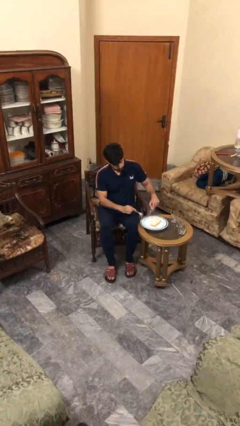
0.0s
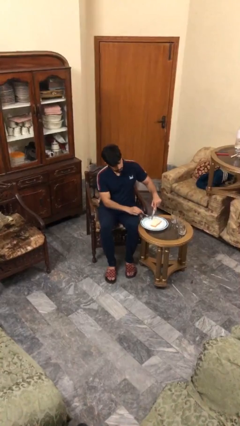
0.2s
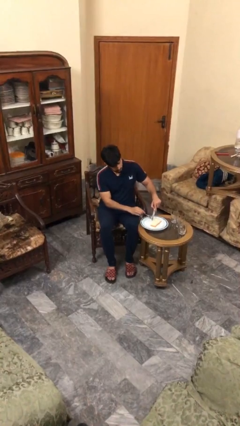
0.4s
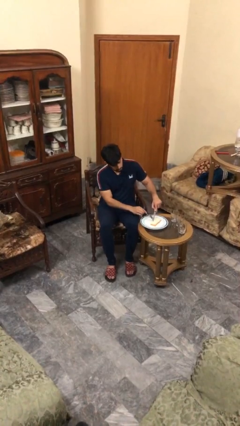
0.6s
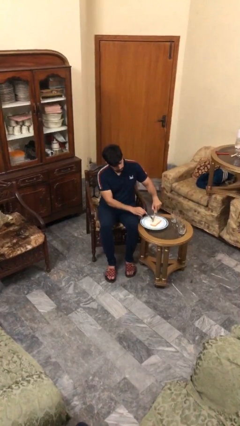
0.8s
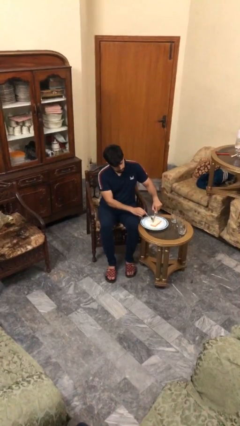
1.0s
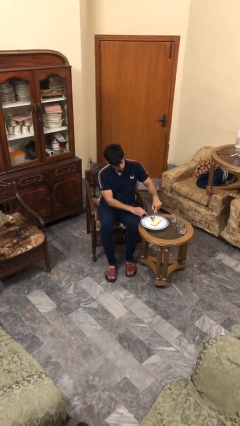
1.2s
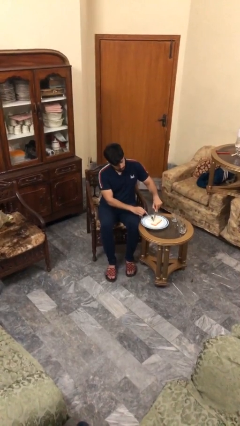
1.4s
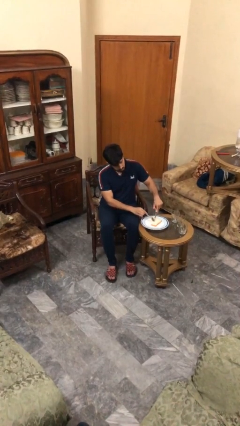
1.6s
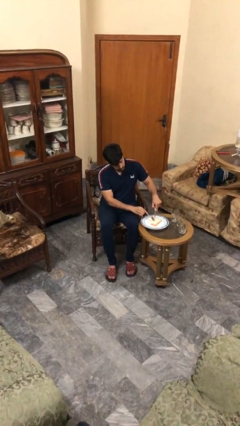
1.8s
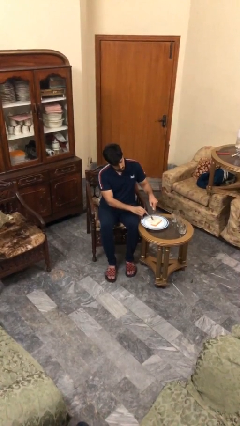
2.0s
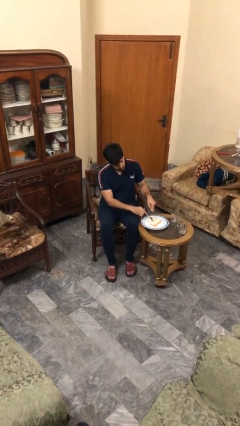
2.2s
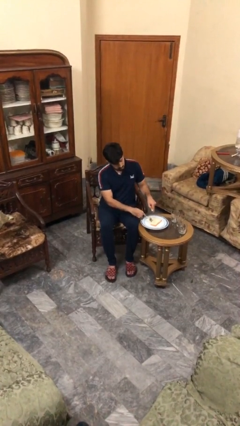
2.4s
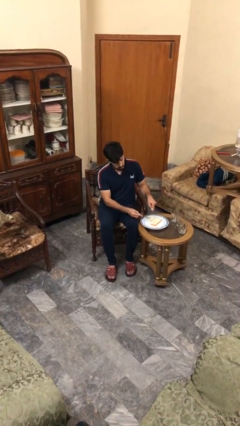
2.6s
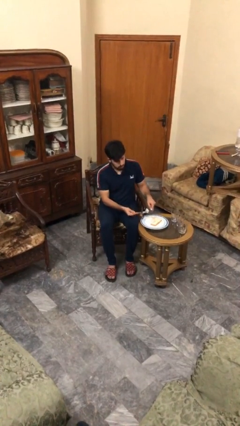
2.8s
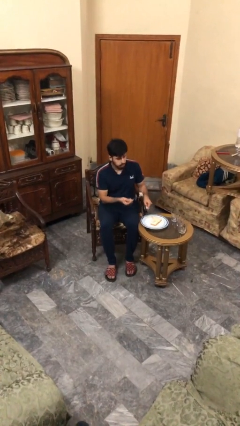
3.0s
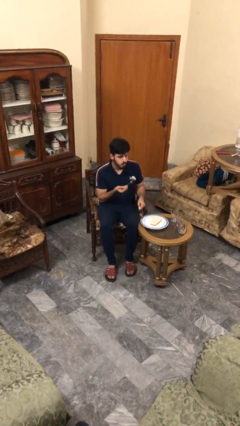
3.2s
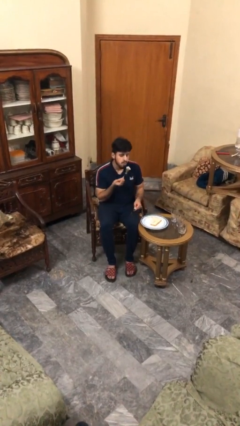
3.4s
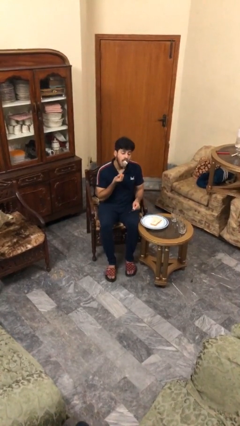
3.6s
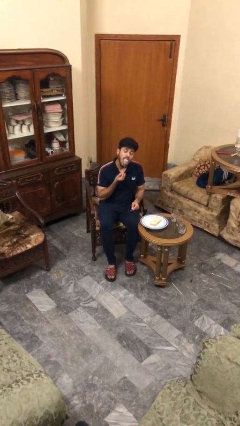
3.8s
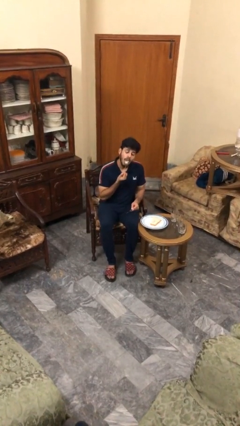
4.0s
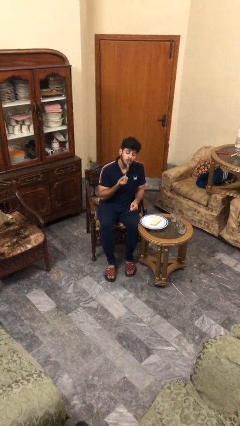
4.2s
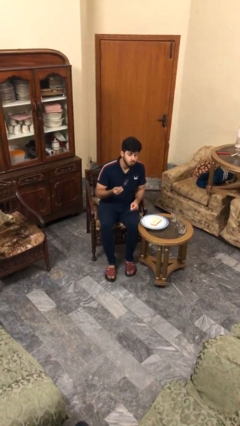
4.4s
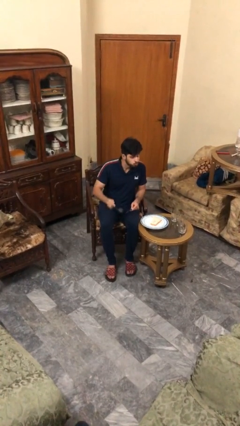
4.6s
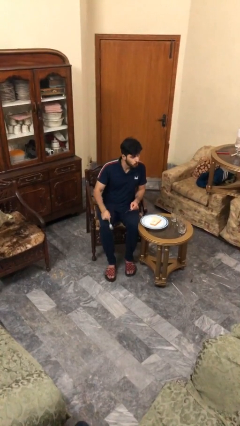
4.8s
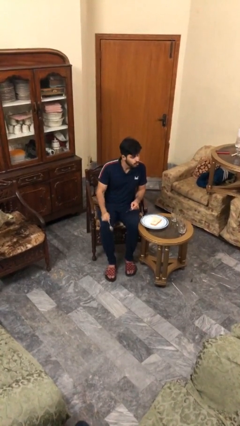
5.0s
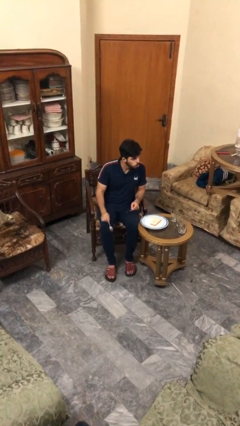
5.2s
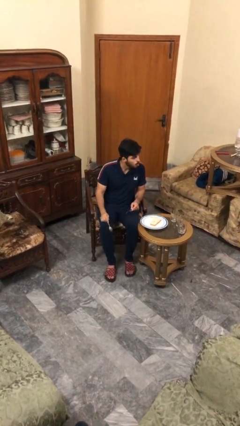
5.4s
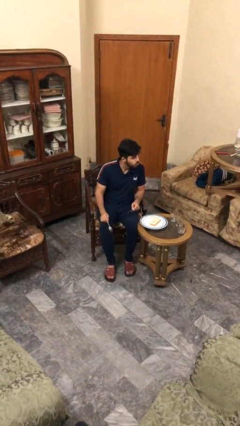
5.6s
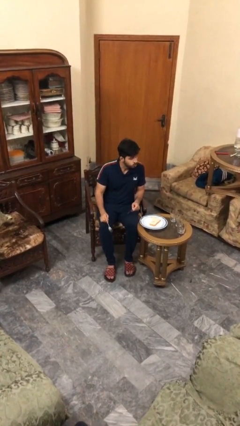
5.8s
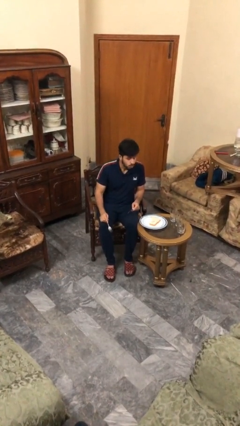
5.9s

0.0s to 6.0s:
person eats with utensil

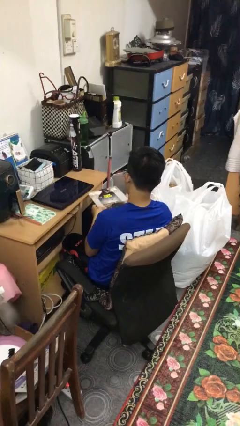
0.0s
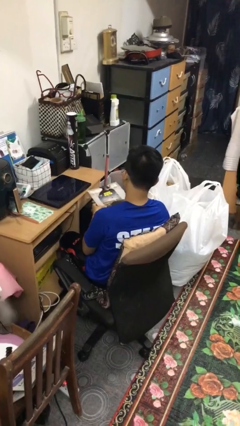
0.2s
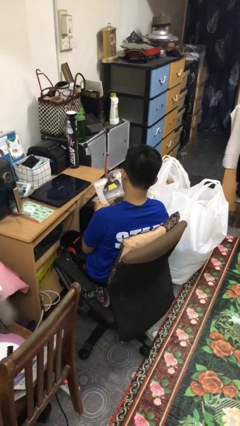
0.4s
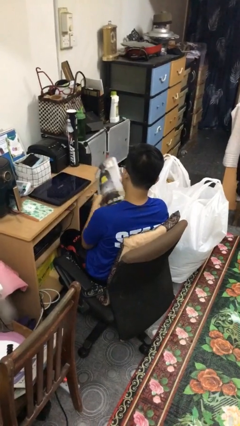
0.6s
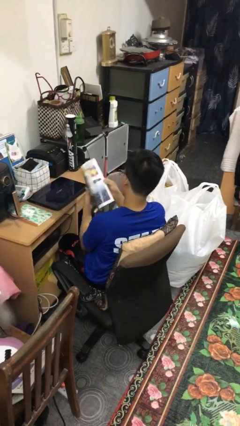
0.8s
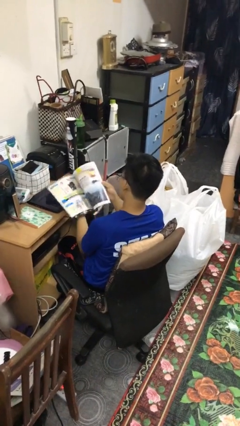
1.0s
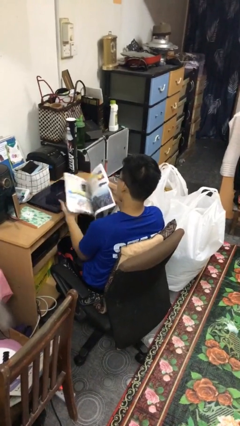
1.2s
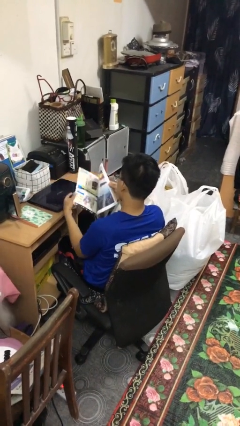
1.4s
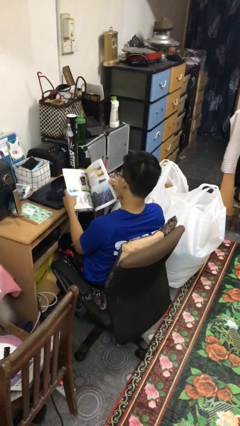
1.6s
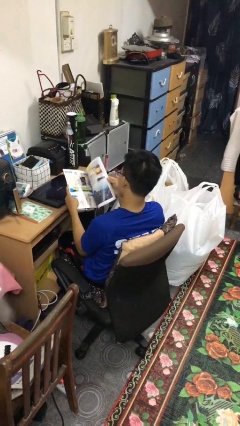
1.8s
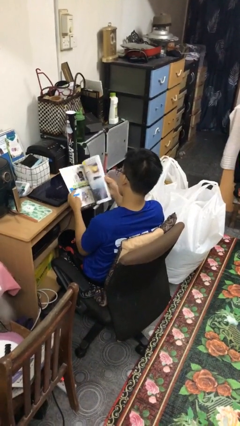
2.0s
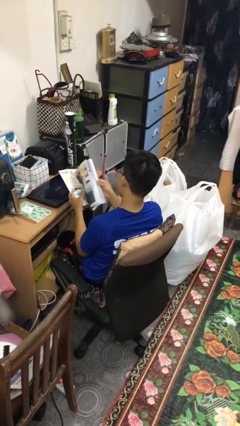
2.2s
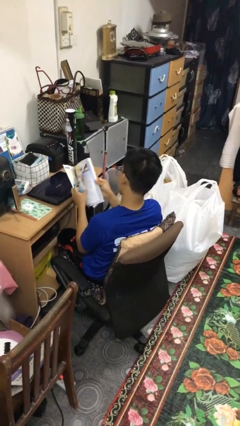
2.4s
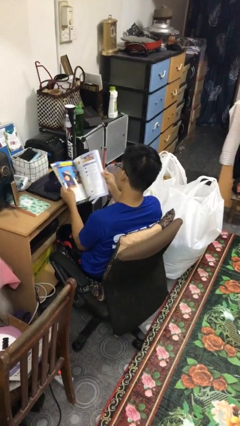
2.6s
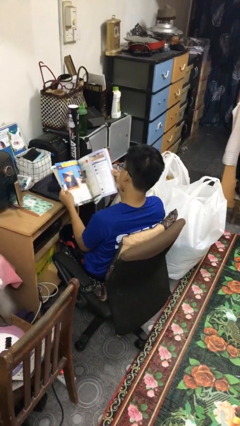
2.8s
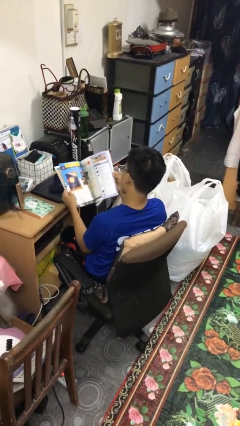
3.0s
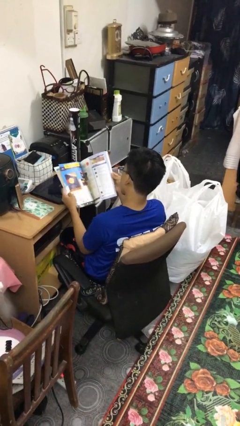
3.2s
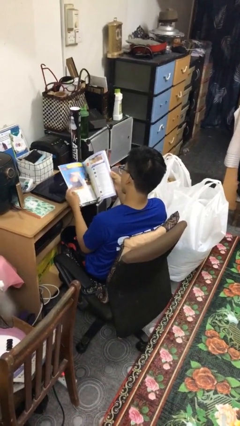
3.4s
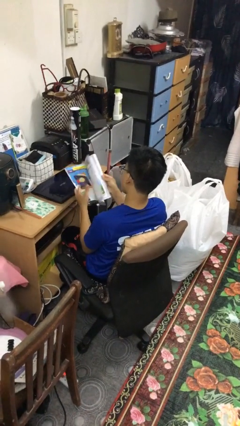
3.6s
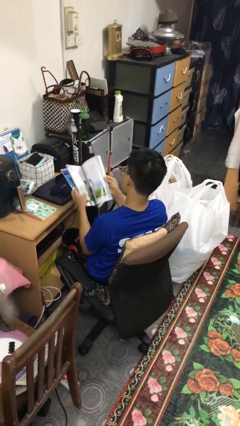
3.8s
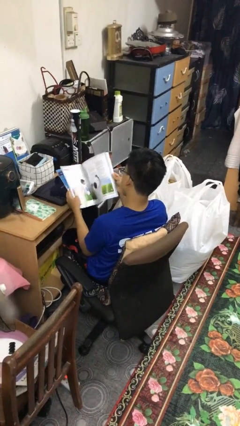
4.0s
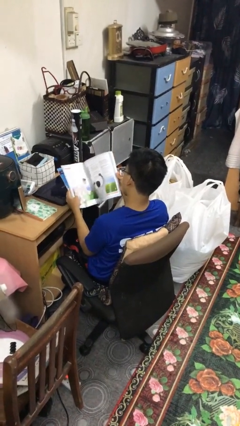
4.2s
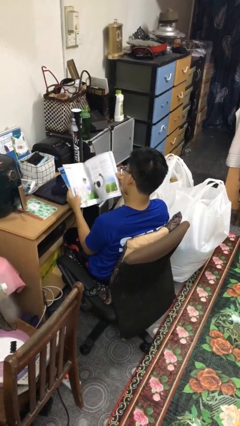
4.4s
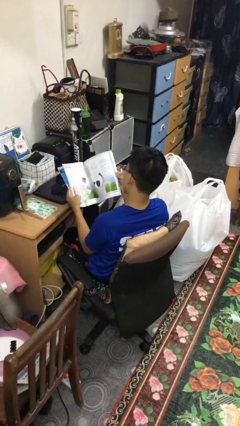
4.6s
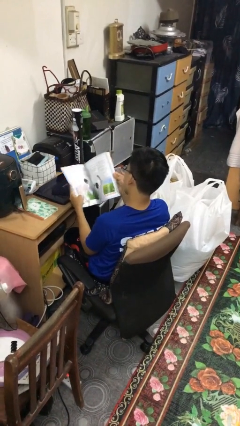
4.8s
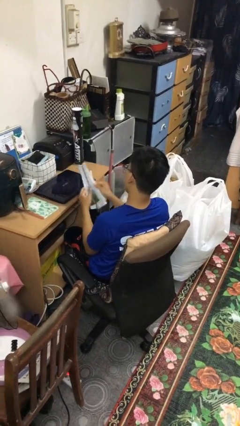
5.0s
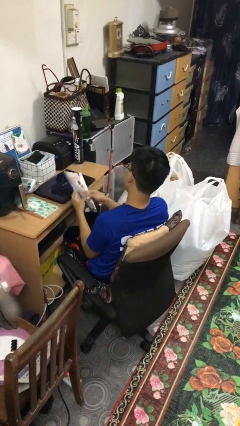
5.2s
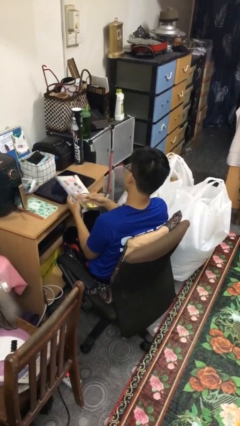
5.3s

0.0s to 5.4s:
person reads magazine

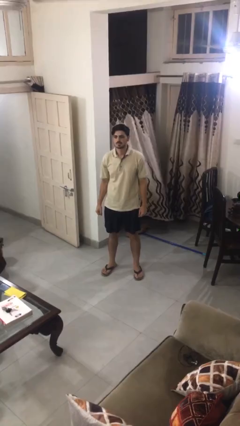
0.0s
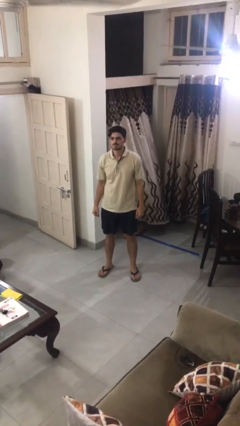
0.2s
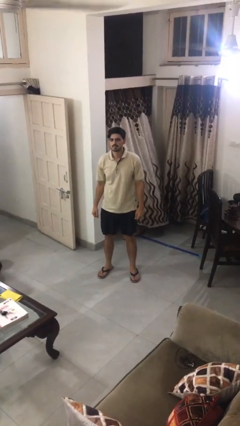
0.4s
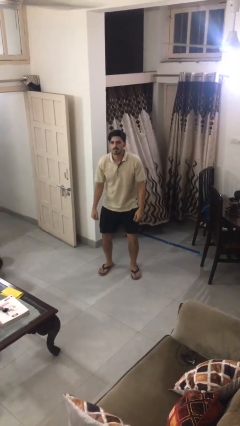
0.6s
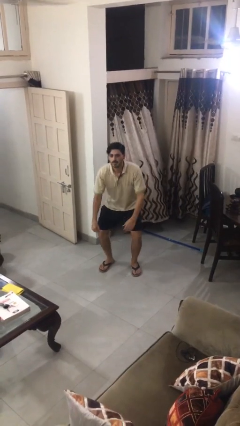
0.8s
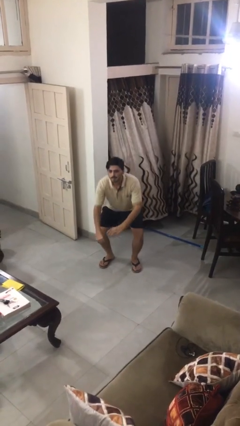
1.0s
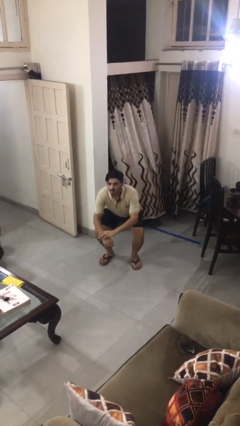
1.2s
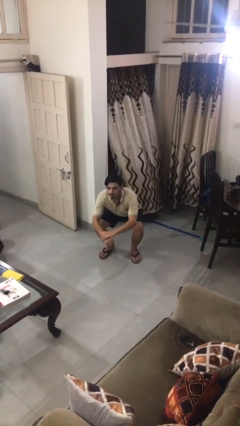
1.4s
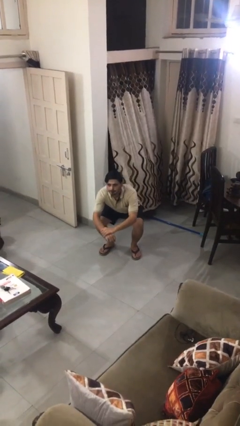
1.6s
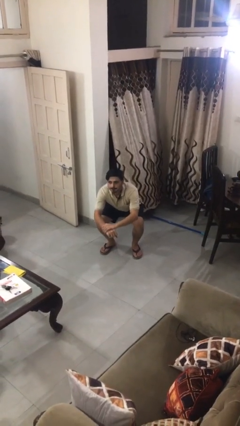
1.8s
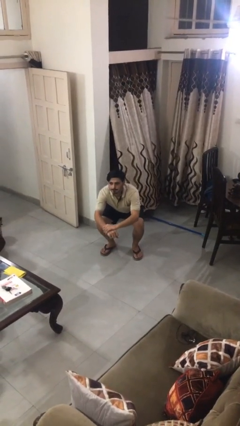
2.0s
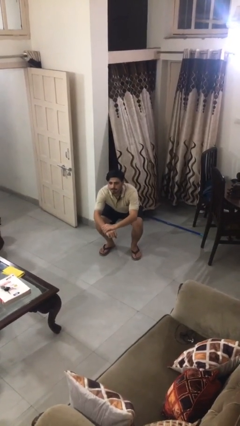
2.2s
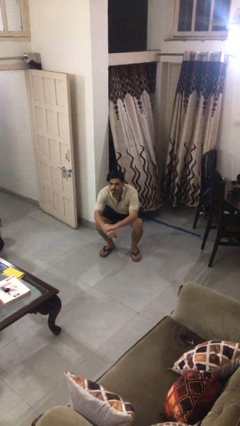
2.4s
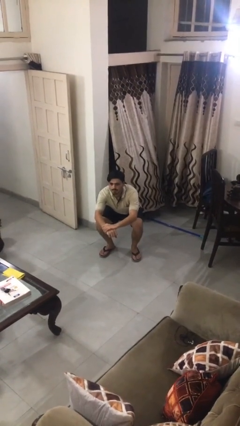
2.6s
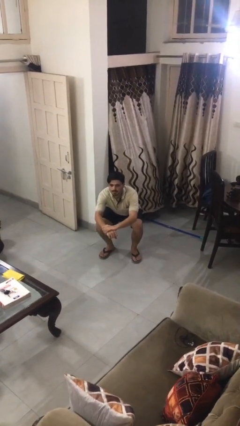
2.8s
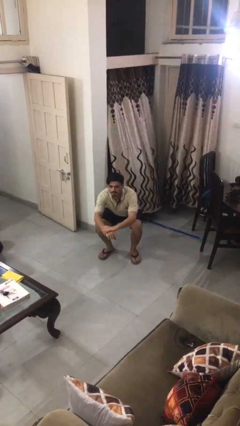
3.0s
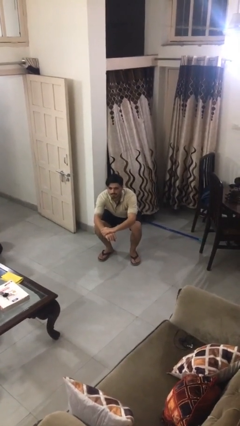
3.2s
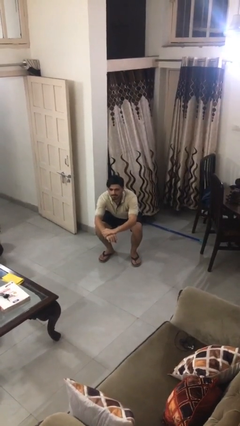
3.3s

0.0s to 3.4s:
person squats

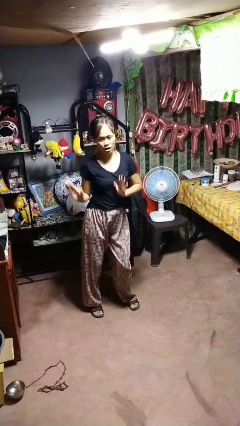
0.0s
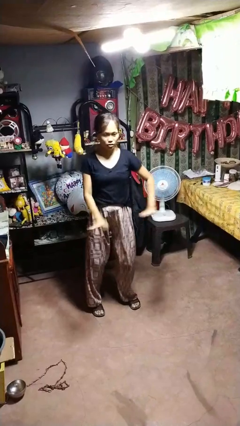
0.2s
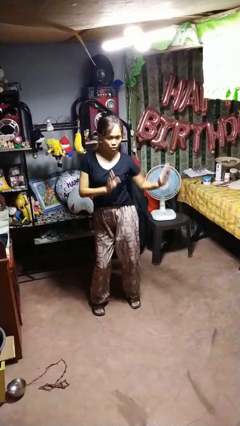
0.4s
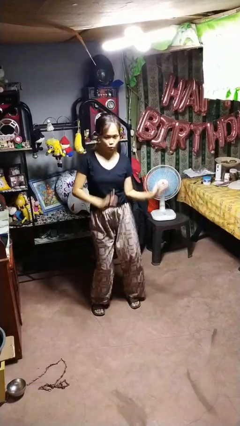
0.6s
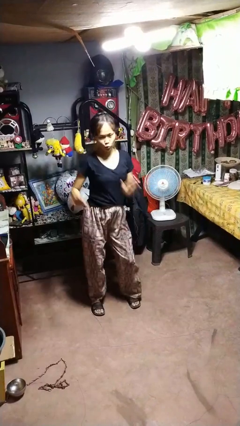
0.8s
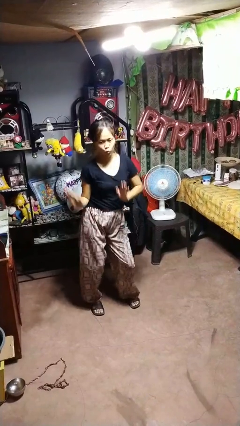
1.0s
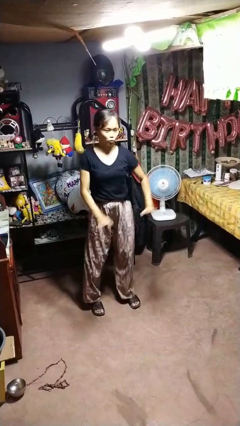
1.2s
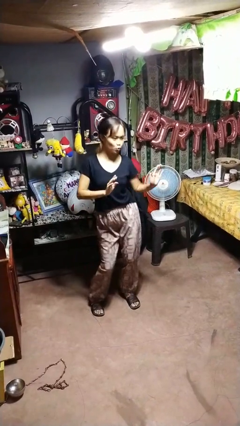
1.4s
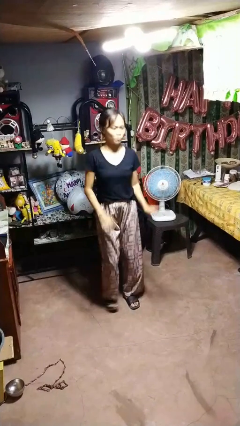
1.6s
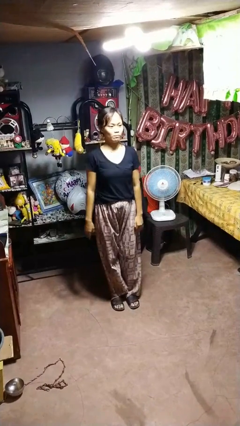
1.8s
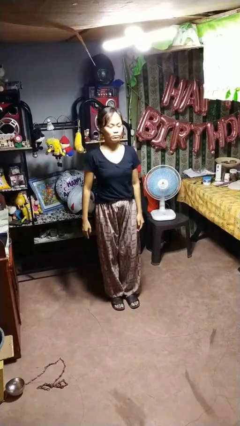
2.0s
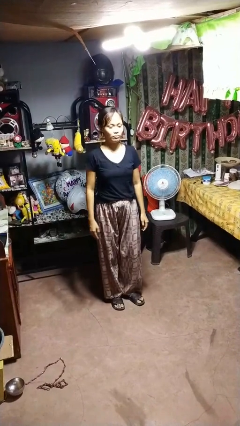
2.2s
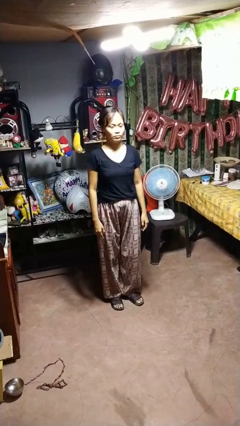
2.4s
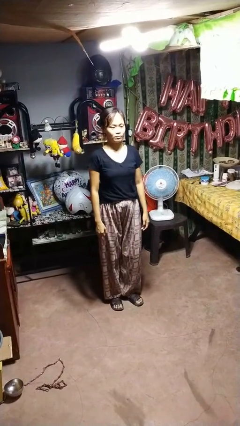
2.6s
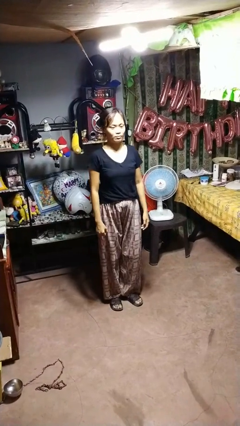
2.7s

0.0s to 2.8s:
person dances in place

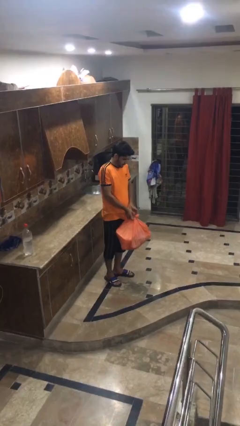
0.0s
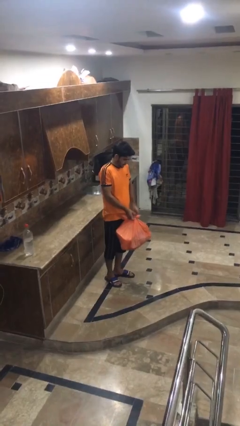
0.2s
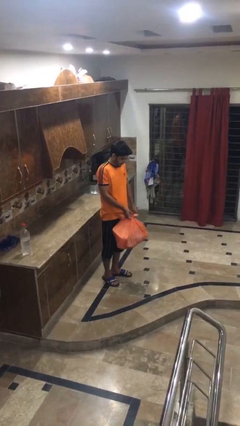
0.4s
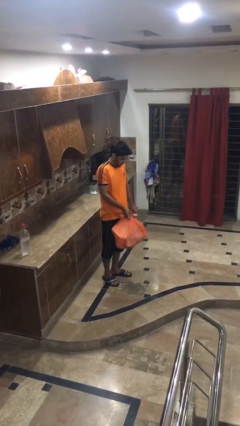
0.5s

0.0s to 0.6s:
person carries groceries
